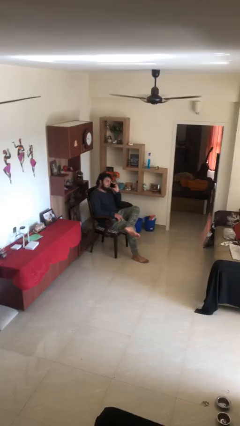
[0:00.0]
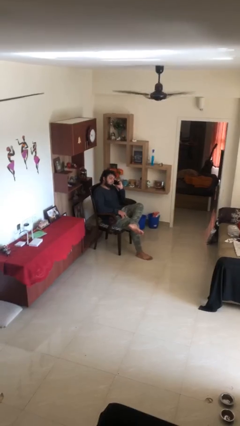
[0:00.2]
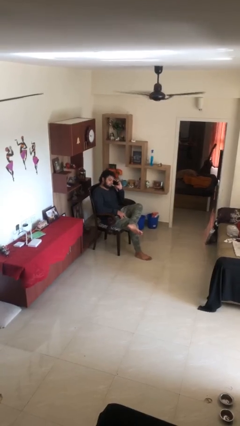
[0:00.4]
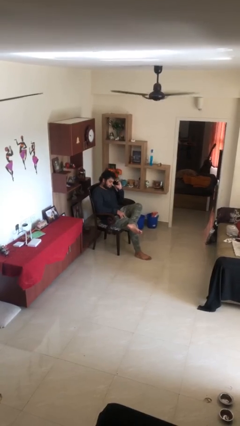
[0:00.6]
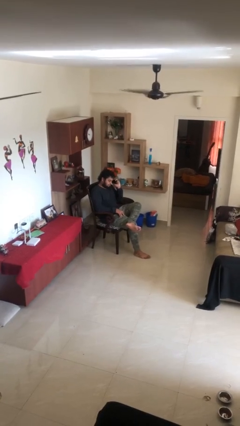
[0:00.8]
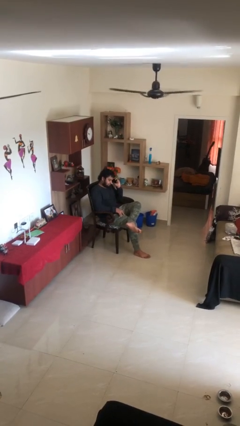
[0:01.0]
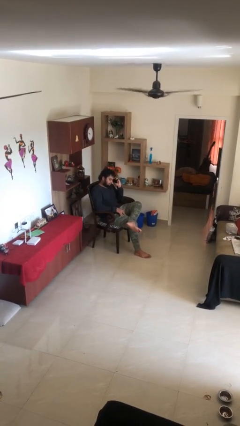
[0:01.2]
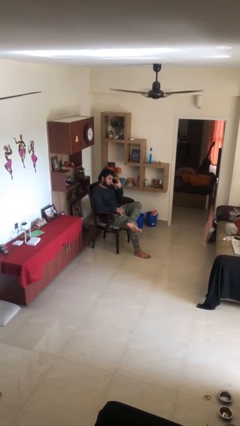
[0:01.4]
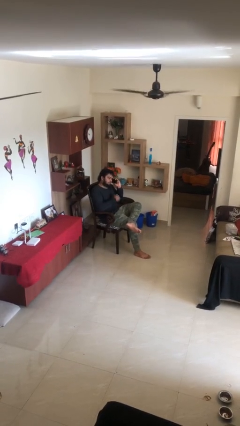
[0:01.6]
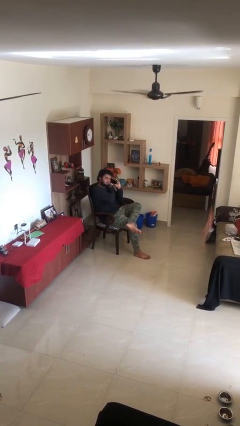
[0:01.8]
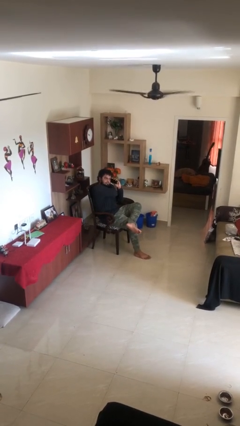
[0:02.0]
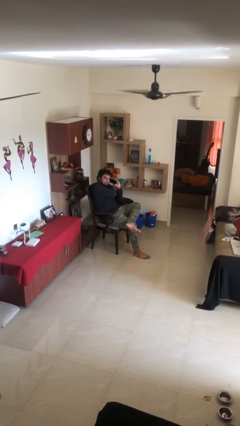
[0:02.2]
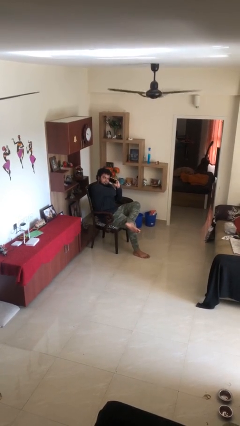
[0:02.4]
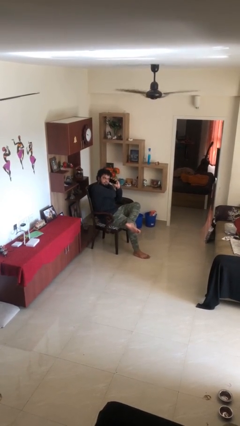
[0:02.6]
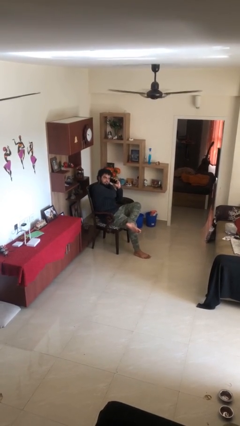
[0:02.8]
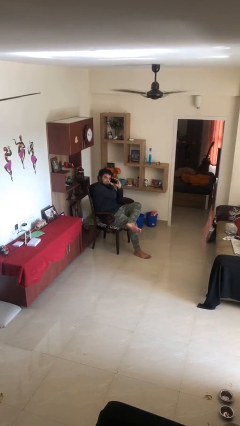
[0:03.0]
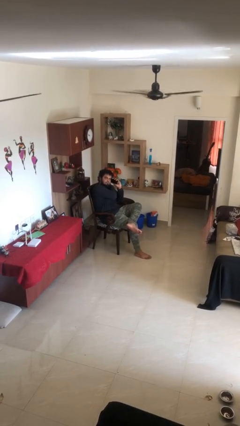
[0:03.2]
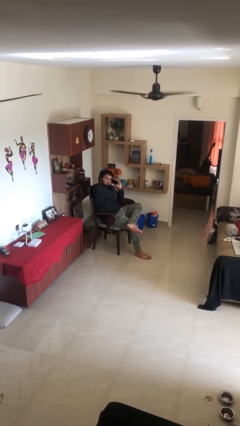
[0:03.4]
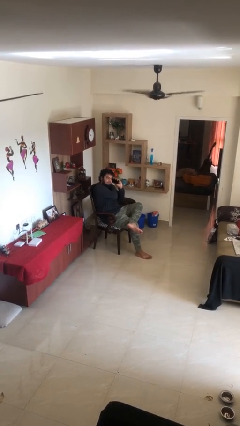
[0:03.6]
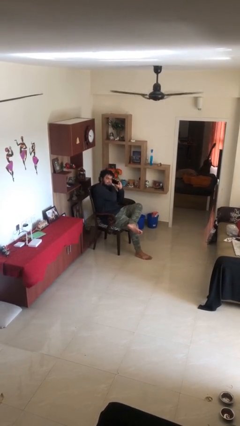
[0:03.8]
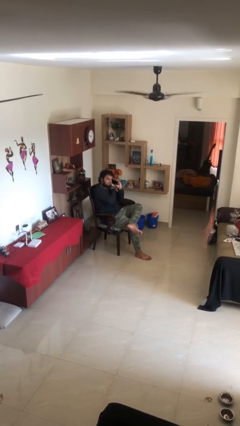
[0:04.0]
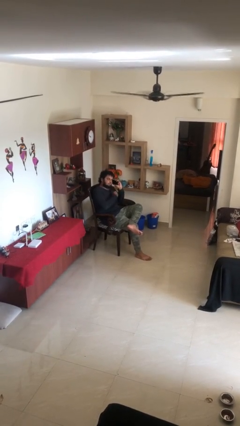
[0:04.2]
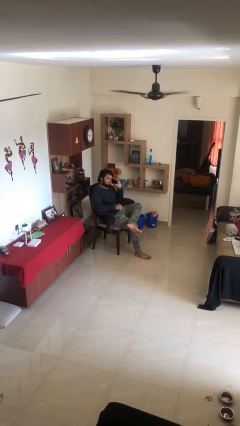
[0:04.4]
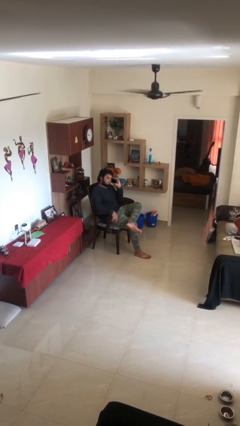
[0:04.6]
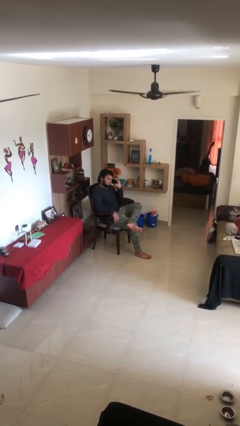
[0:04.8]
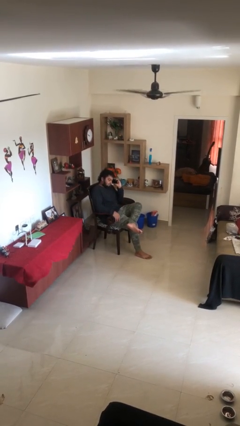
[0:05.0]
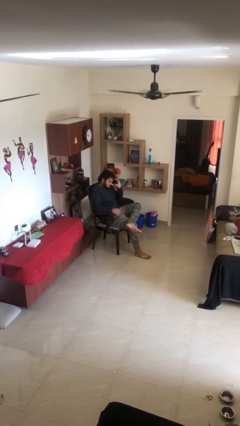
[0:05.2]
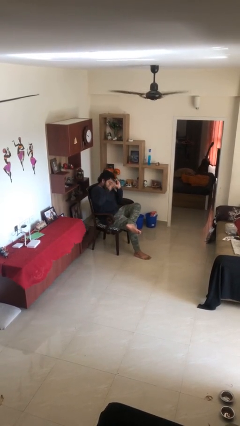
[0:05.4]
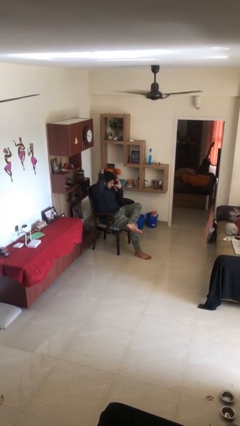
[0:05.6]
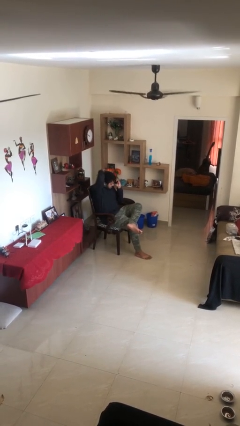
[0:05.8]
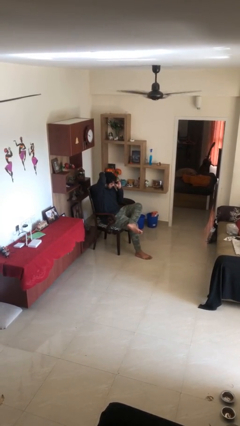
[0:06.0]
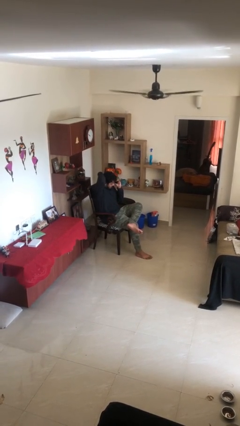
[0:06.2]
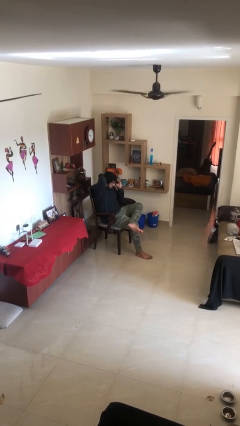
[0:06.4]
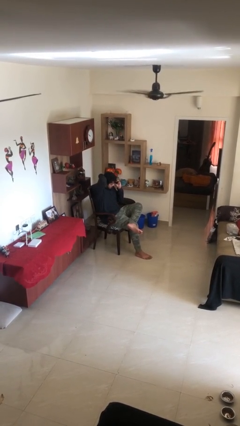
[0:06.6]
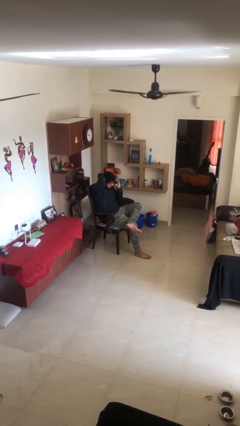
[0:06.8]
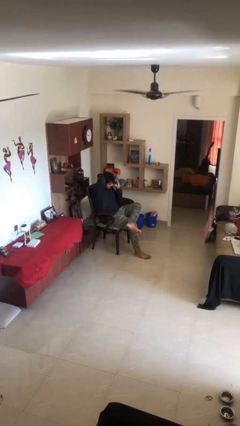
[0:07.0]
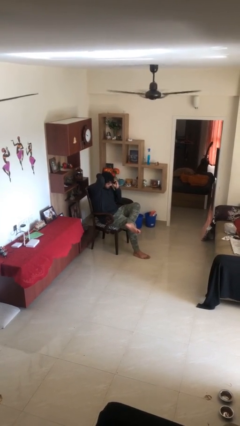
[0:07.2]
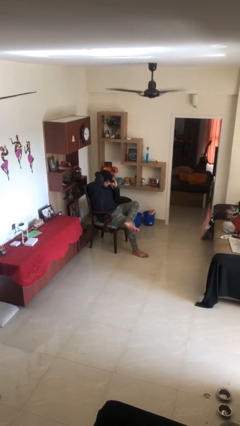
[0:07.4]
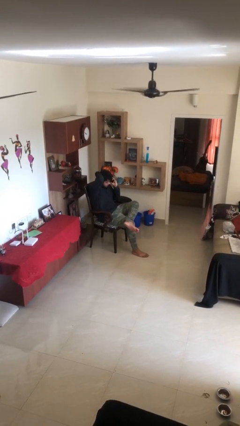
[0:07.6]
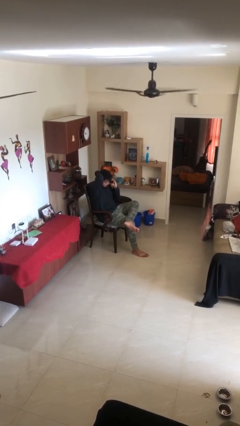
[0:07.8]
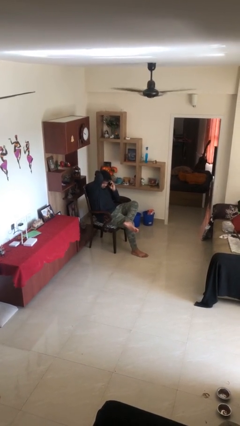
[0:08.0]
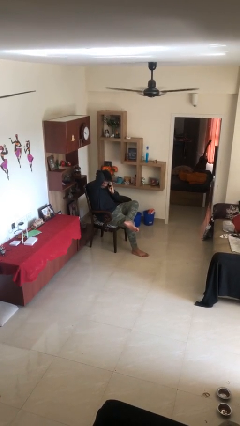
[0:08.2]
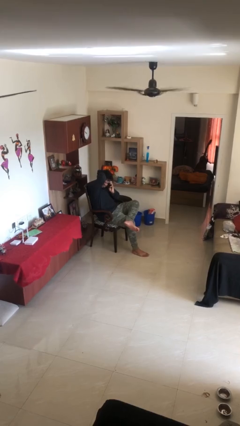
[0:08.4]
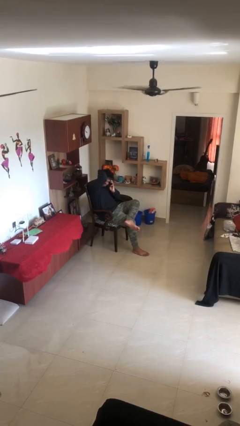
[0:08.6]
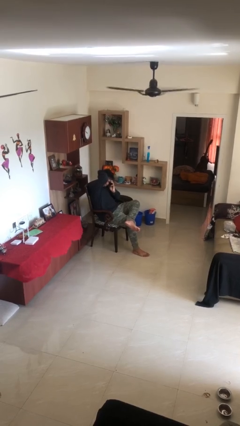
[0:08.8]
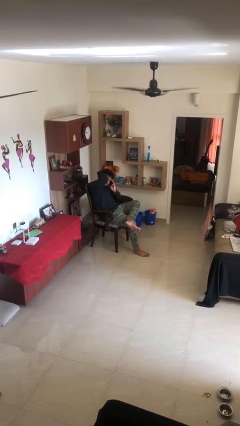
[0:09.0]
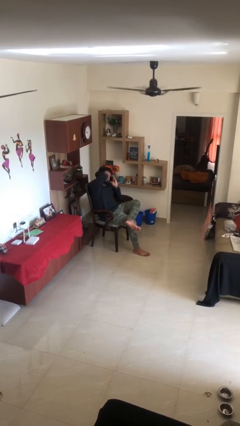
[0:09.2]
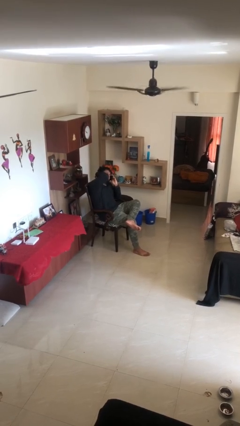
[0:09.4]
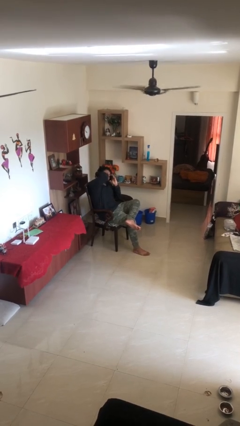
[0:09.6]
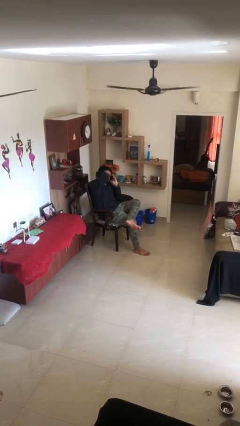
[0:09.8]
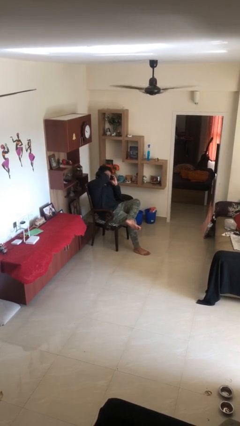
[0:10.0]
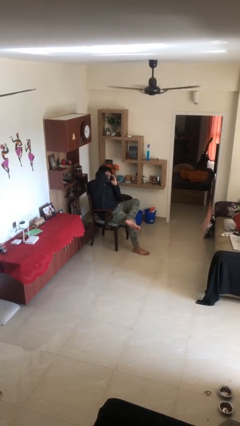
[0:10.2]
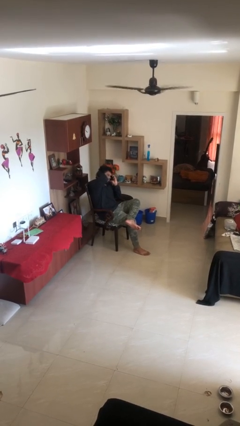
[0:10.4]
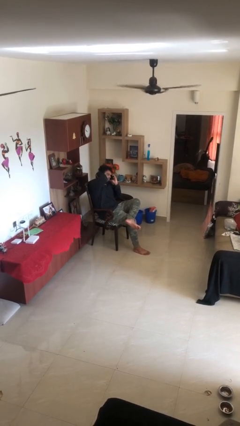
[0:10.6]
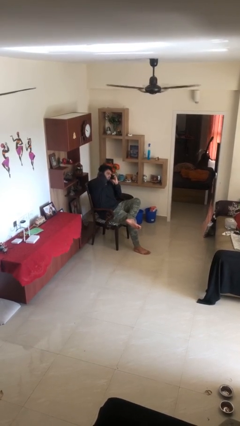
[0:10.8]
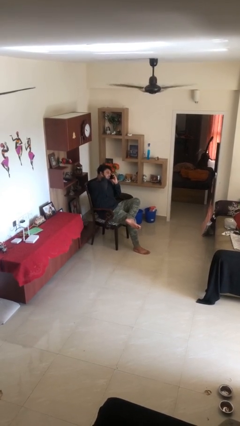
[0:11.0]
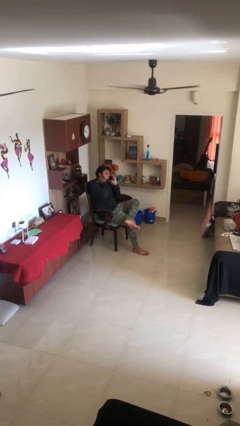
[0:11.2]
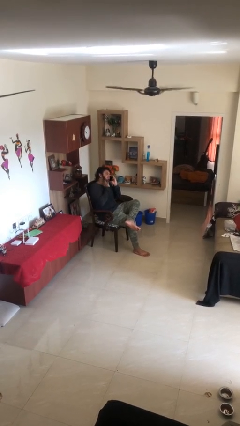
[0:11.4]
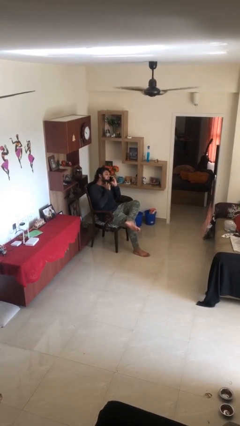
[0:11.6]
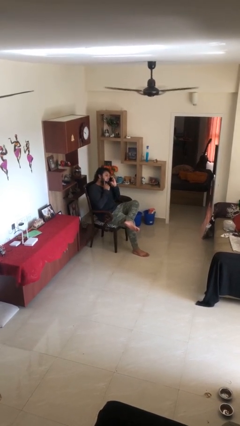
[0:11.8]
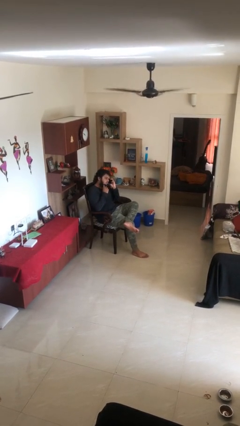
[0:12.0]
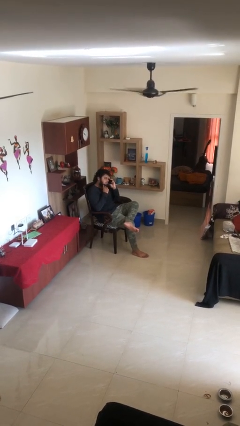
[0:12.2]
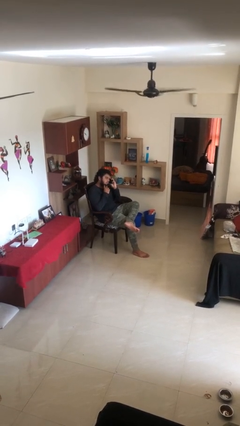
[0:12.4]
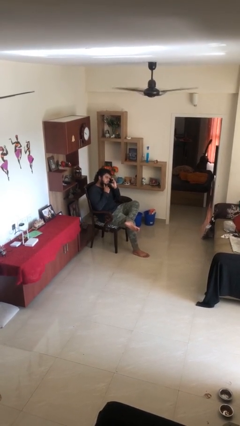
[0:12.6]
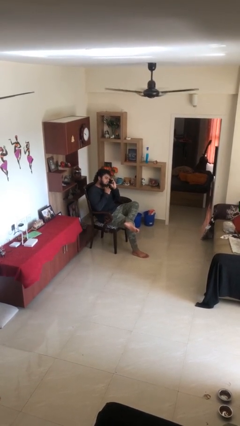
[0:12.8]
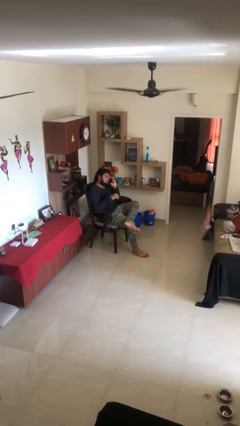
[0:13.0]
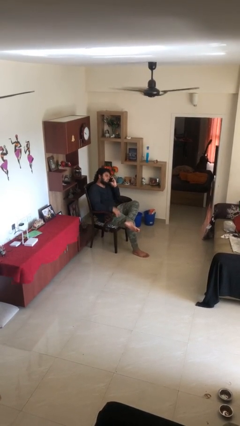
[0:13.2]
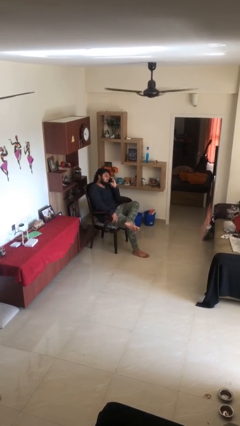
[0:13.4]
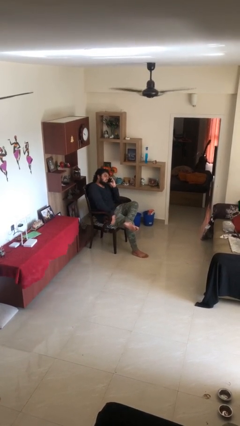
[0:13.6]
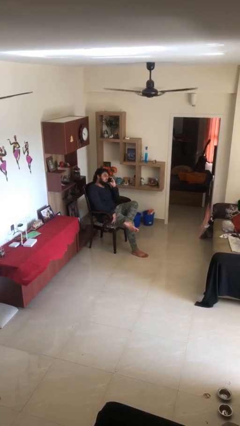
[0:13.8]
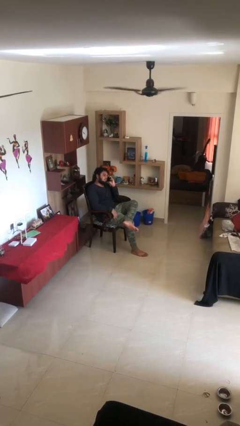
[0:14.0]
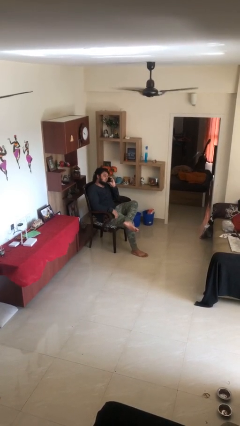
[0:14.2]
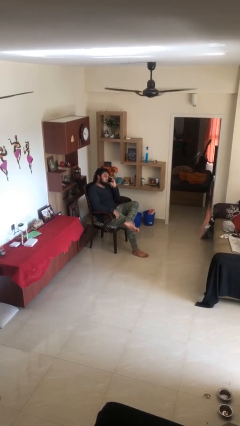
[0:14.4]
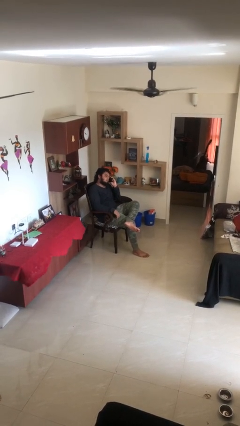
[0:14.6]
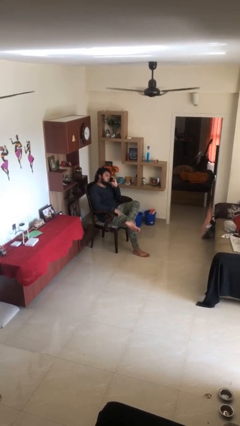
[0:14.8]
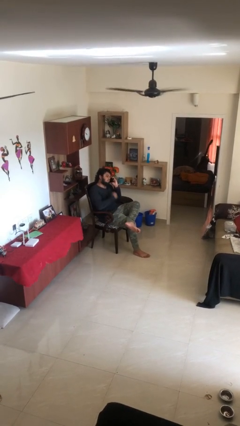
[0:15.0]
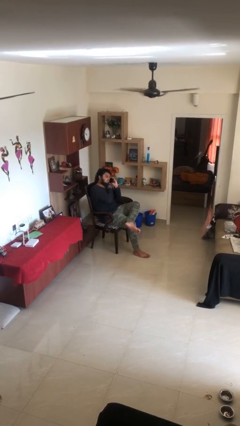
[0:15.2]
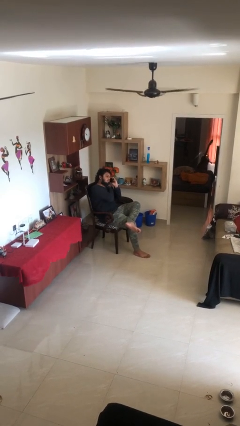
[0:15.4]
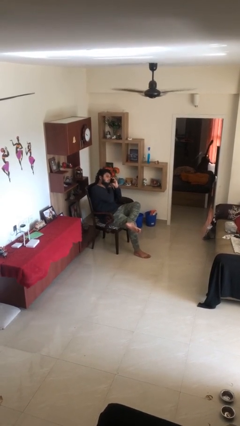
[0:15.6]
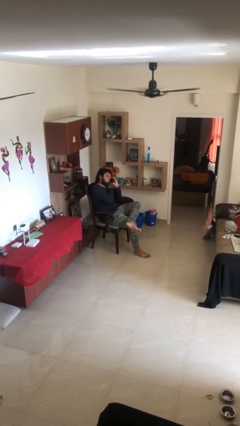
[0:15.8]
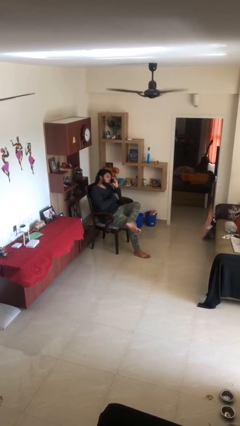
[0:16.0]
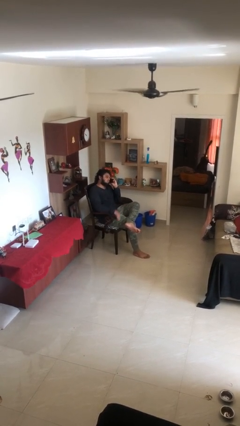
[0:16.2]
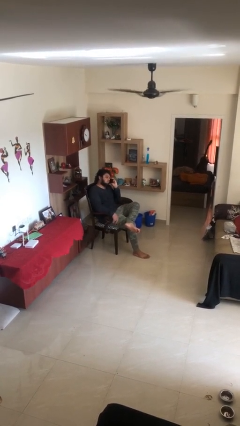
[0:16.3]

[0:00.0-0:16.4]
person talks on phone

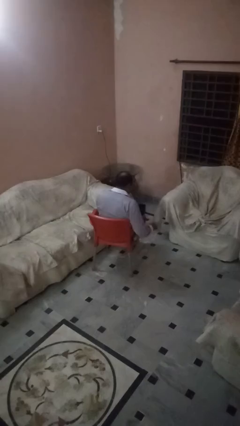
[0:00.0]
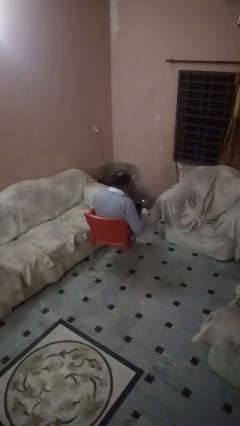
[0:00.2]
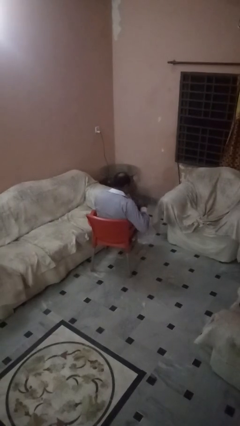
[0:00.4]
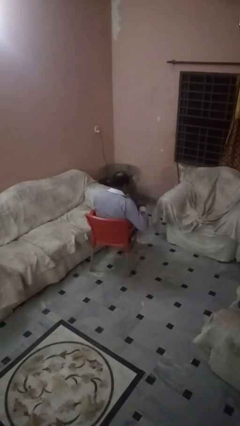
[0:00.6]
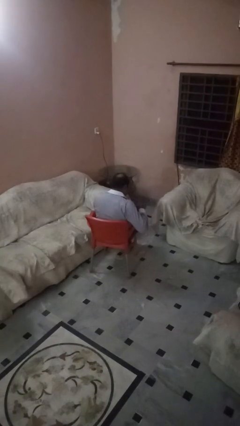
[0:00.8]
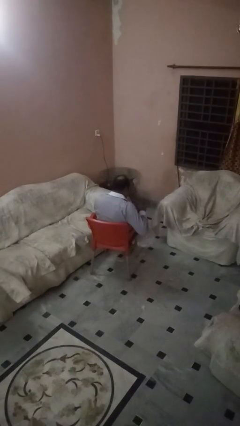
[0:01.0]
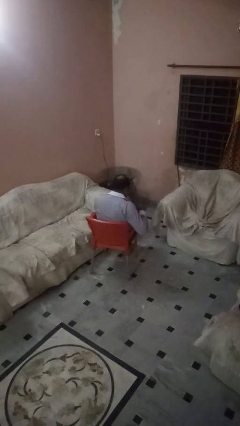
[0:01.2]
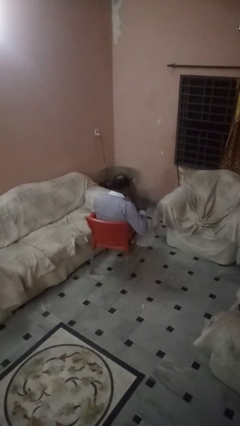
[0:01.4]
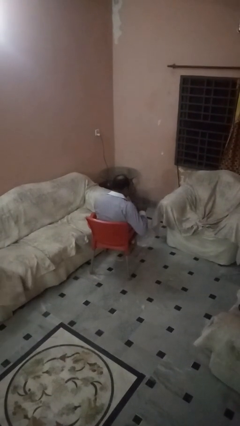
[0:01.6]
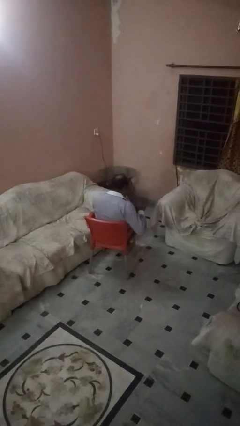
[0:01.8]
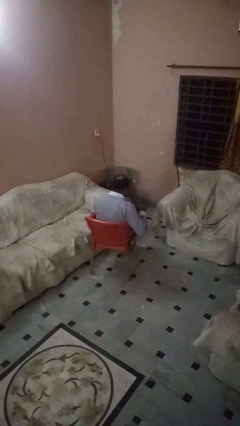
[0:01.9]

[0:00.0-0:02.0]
person stirs mug
